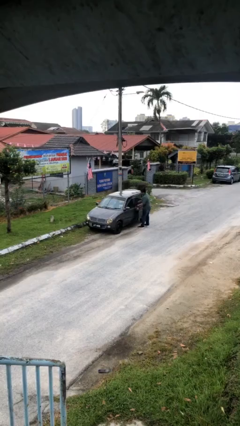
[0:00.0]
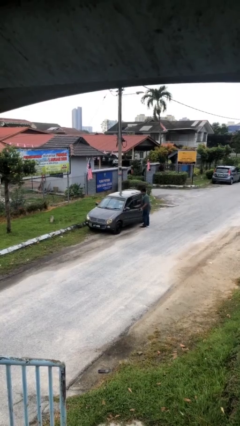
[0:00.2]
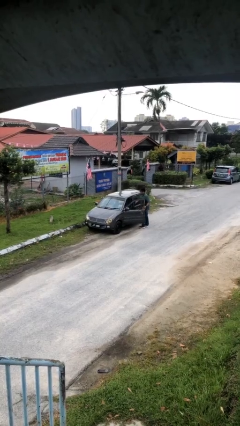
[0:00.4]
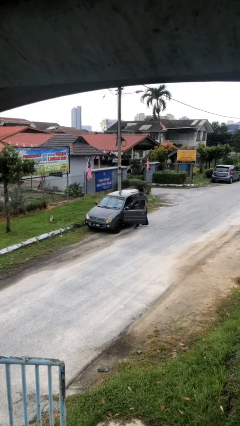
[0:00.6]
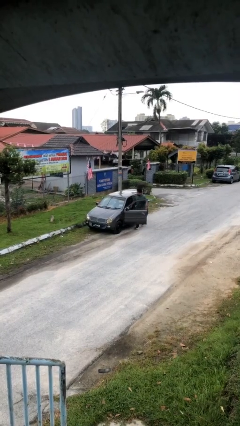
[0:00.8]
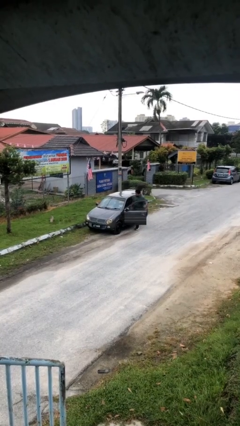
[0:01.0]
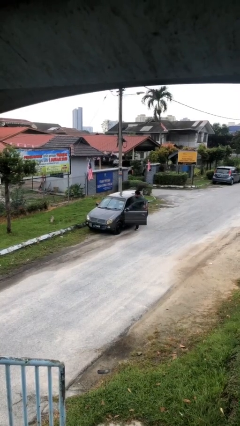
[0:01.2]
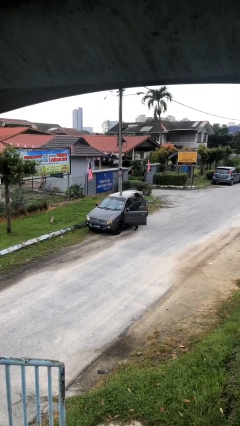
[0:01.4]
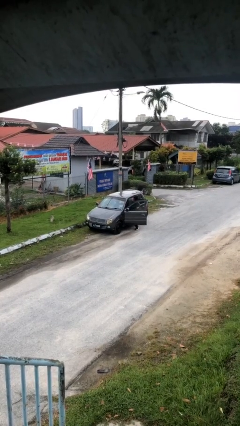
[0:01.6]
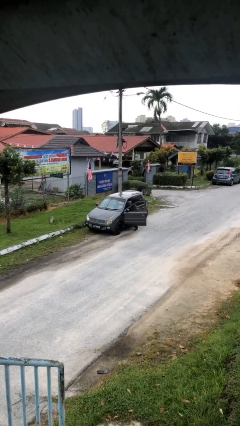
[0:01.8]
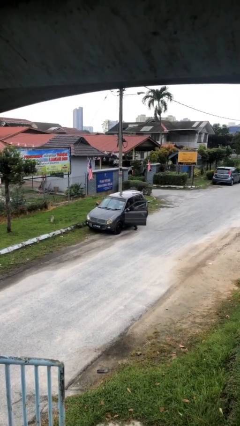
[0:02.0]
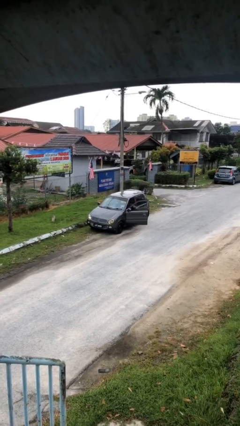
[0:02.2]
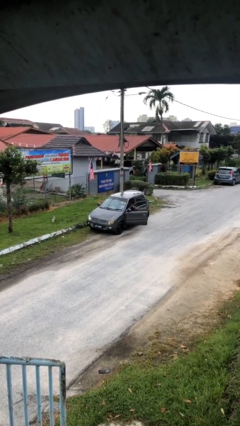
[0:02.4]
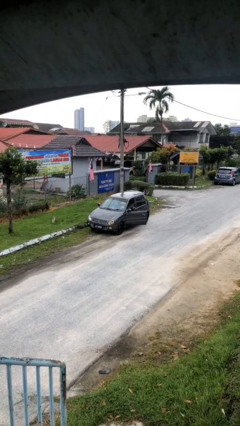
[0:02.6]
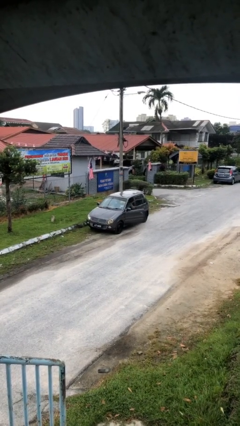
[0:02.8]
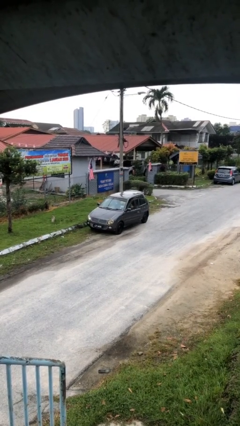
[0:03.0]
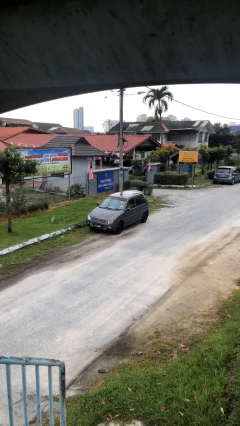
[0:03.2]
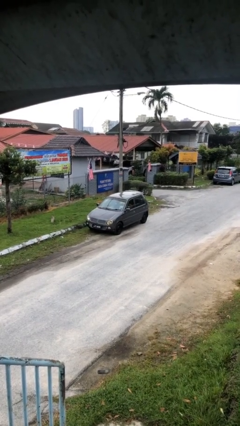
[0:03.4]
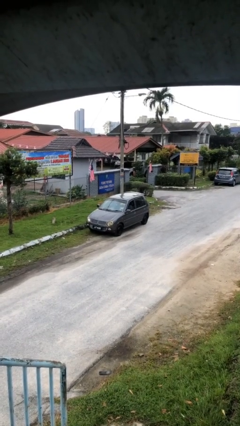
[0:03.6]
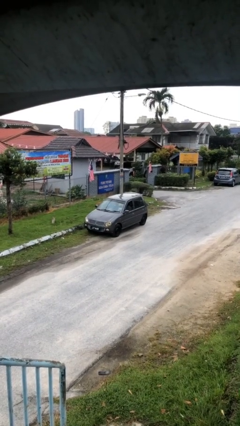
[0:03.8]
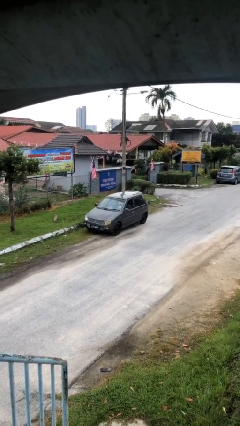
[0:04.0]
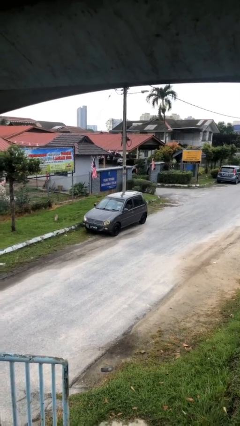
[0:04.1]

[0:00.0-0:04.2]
car picks up person

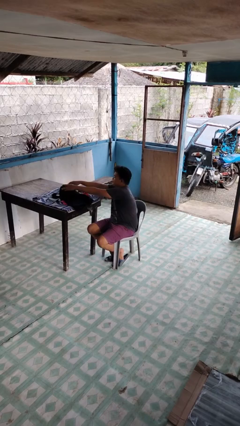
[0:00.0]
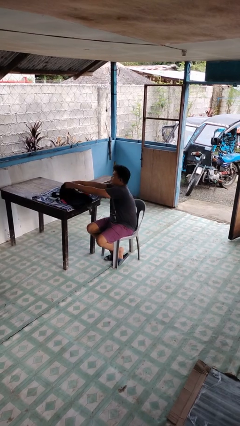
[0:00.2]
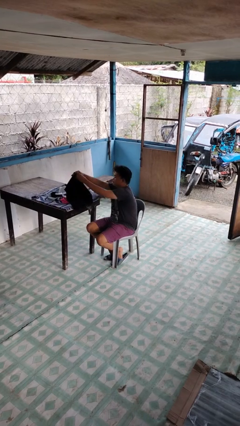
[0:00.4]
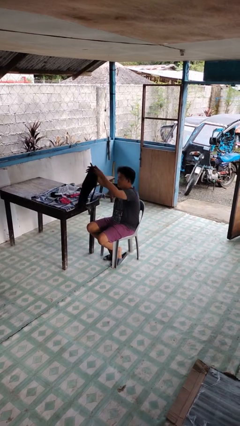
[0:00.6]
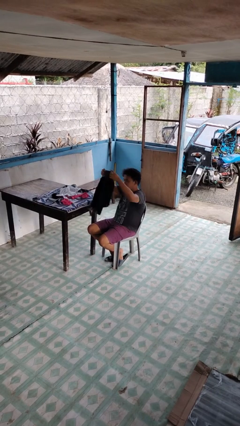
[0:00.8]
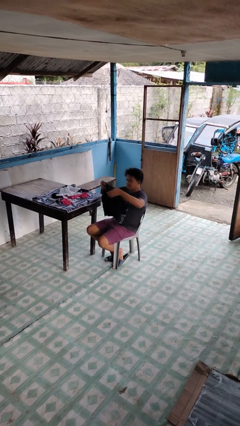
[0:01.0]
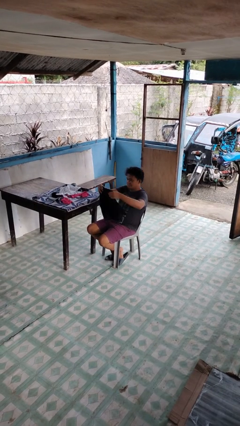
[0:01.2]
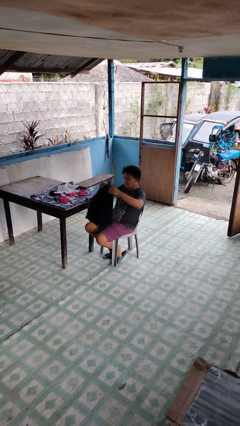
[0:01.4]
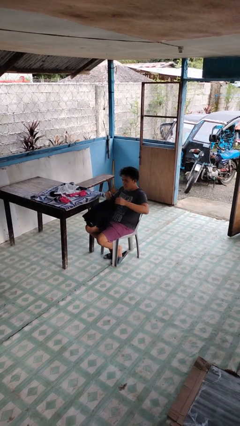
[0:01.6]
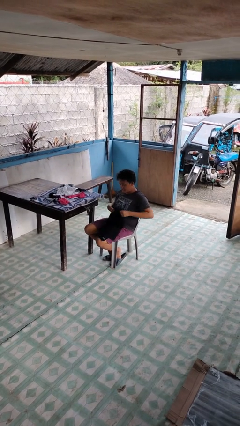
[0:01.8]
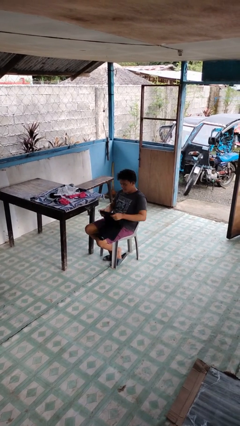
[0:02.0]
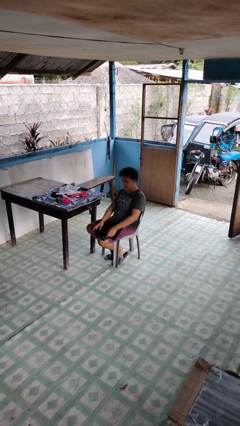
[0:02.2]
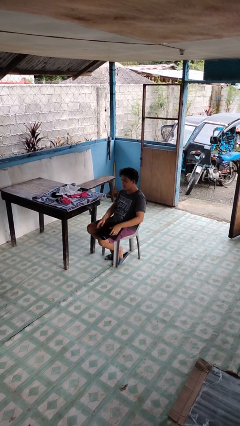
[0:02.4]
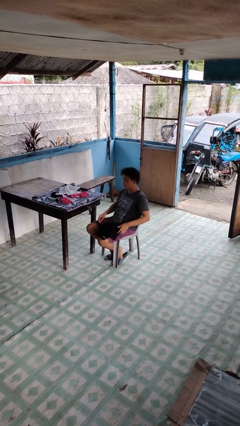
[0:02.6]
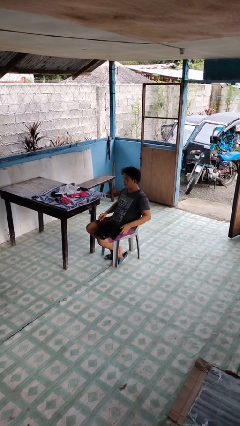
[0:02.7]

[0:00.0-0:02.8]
person folds pants

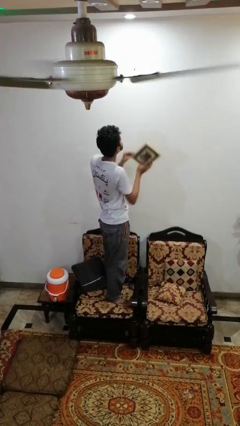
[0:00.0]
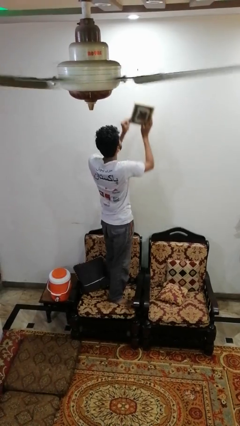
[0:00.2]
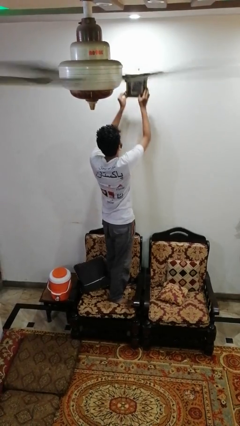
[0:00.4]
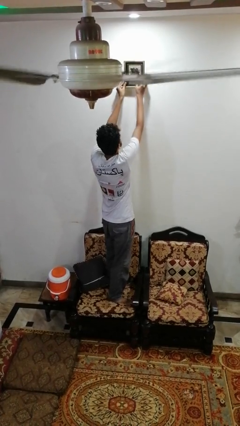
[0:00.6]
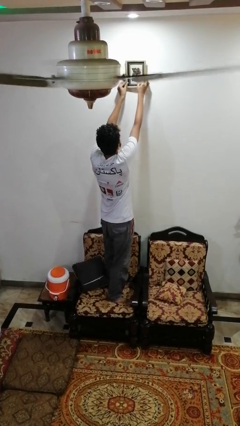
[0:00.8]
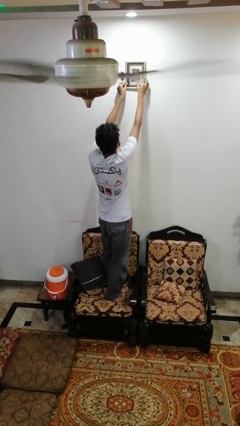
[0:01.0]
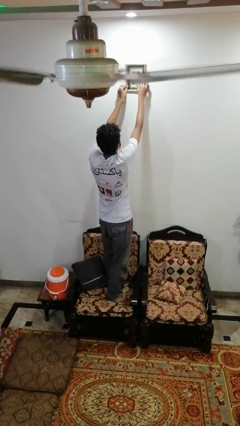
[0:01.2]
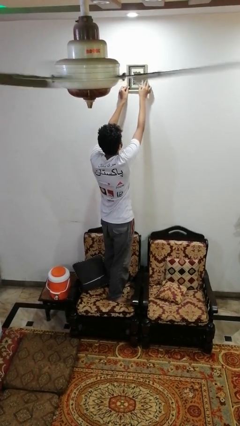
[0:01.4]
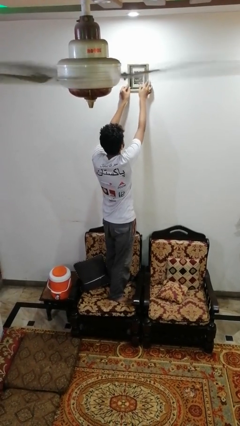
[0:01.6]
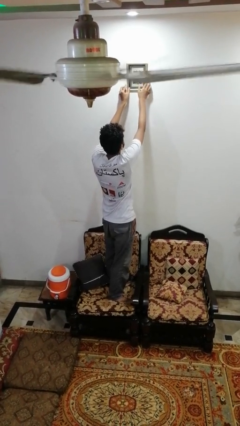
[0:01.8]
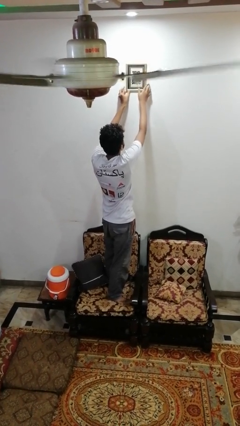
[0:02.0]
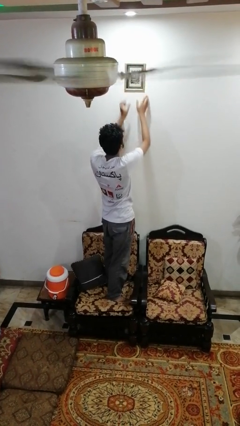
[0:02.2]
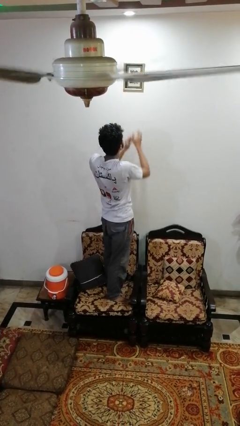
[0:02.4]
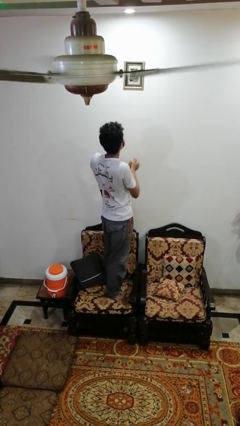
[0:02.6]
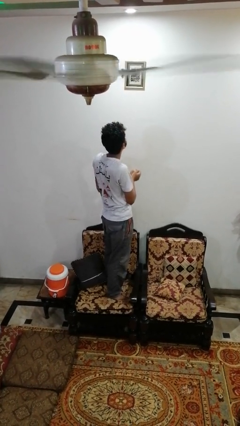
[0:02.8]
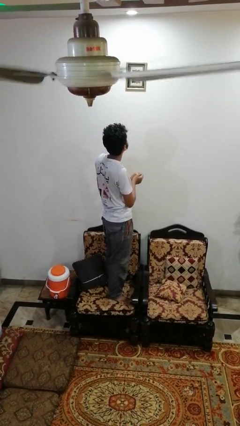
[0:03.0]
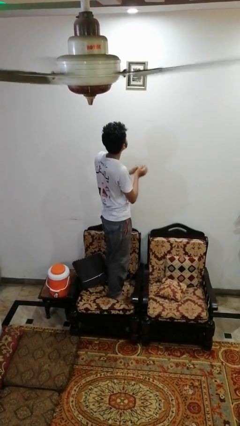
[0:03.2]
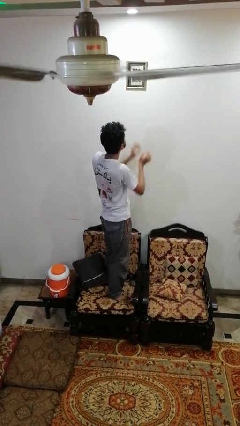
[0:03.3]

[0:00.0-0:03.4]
person puts up picture frame

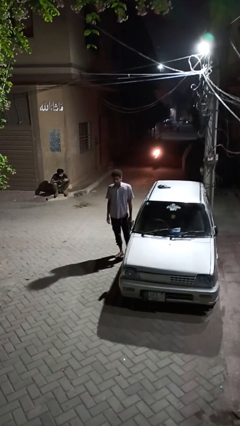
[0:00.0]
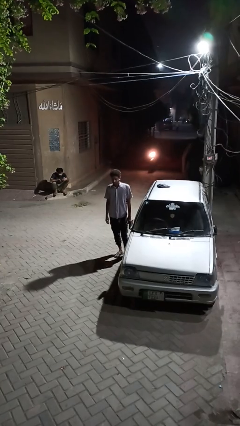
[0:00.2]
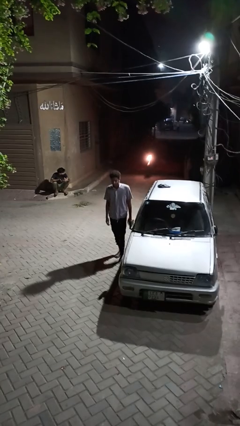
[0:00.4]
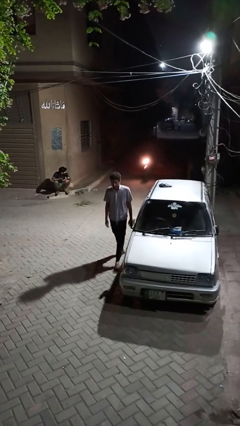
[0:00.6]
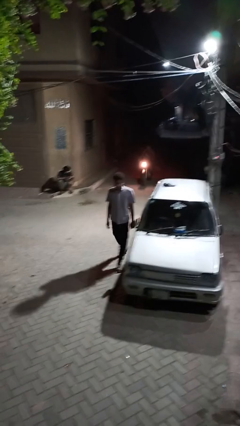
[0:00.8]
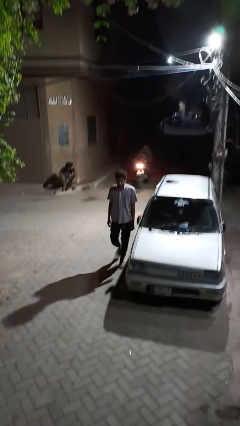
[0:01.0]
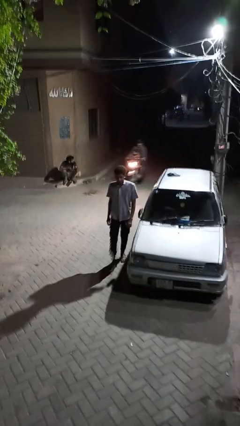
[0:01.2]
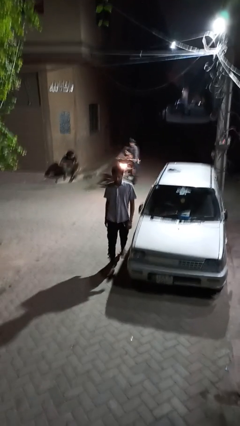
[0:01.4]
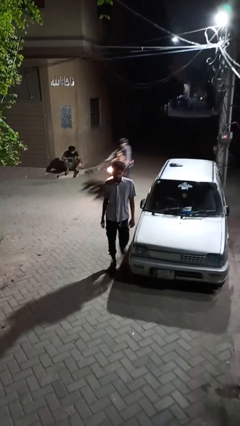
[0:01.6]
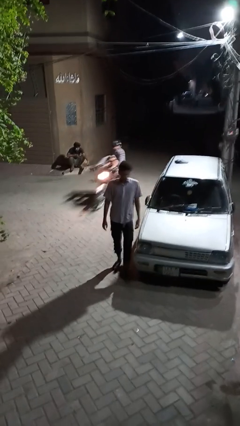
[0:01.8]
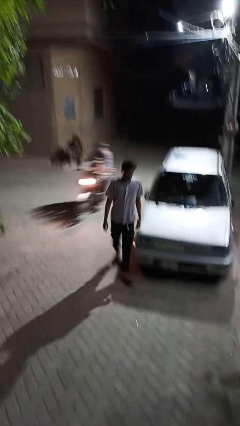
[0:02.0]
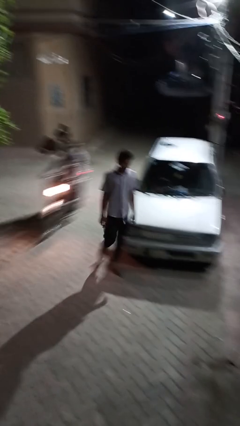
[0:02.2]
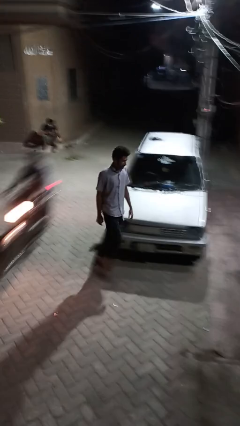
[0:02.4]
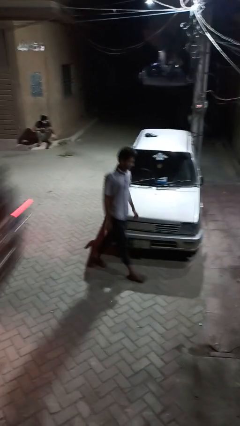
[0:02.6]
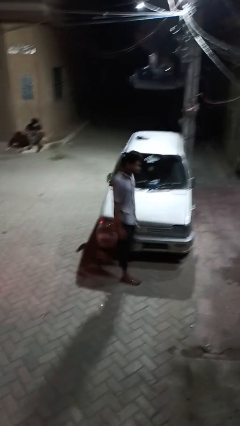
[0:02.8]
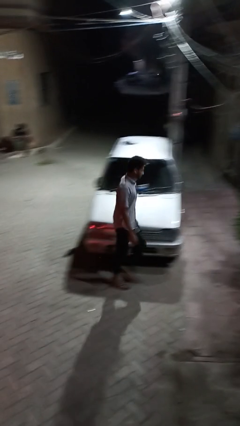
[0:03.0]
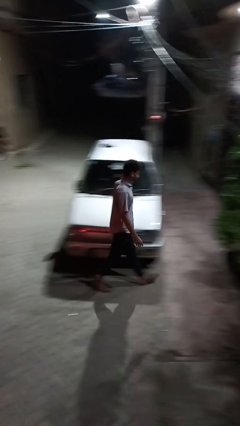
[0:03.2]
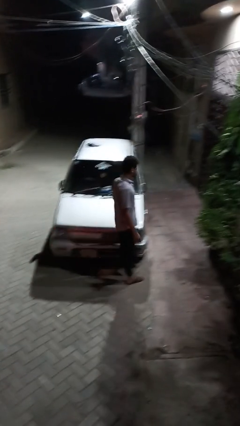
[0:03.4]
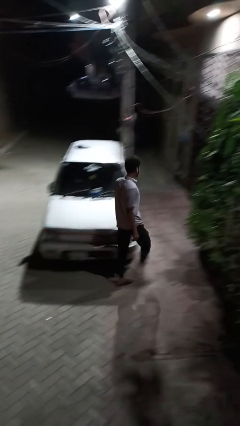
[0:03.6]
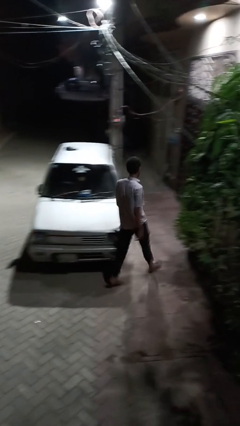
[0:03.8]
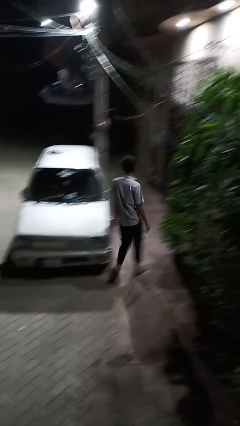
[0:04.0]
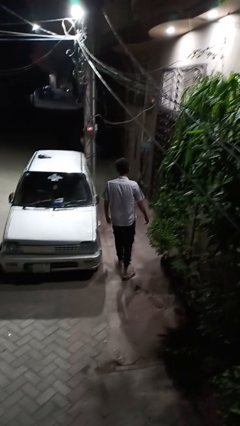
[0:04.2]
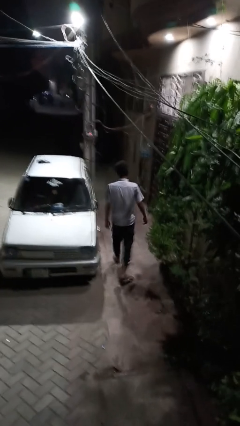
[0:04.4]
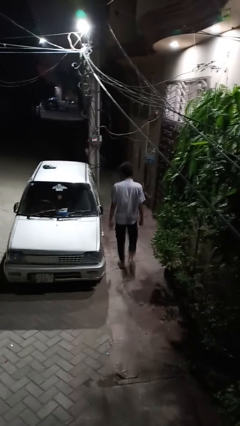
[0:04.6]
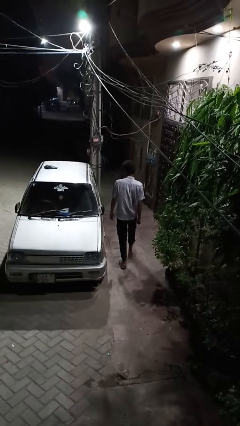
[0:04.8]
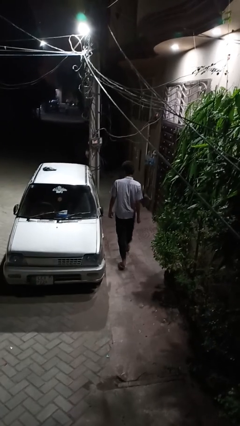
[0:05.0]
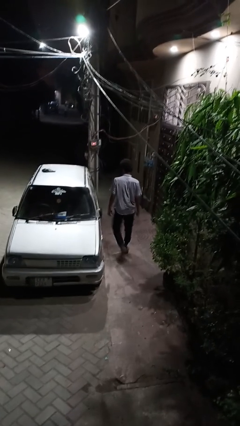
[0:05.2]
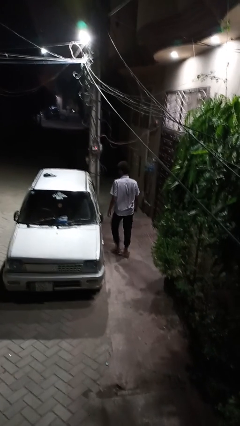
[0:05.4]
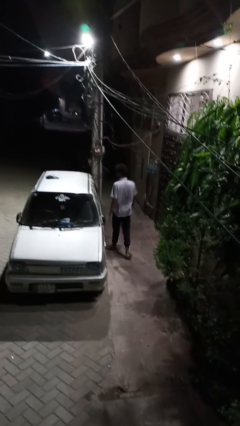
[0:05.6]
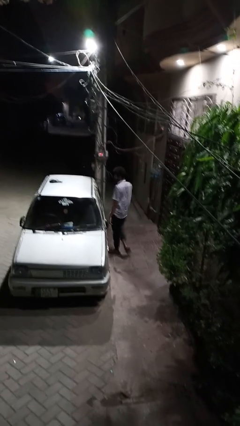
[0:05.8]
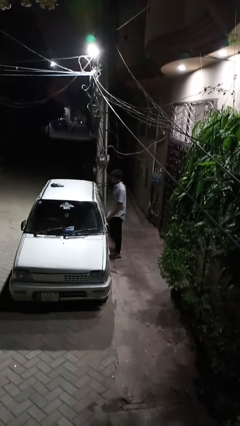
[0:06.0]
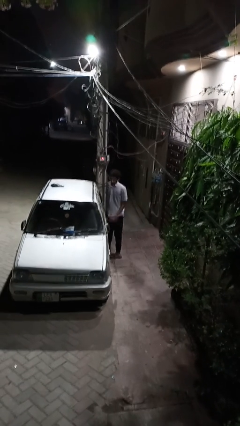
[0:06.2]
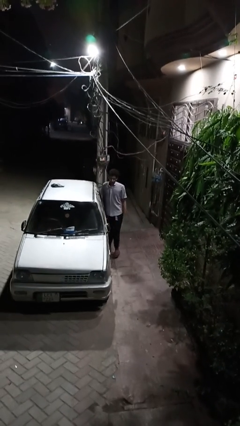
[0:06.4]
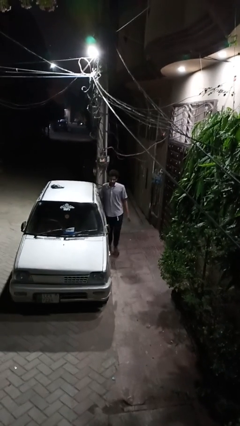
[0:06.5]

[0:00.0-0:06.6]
person walks around car

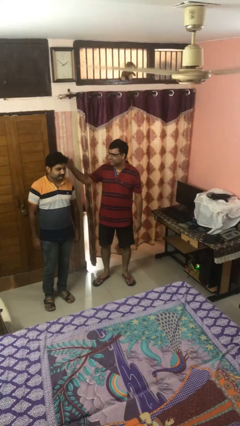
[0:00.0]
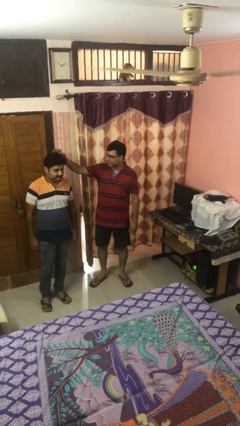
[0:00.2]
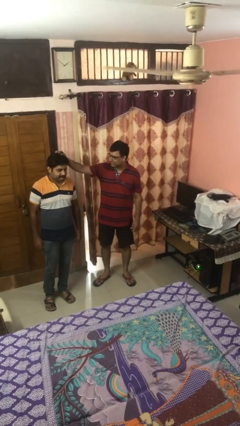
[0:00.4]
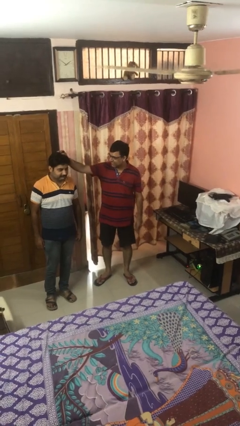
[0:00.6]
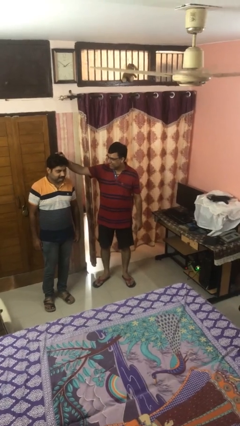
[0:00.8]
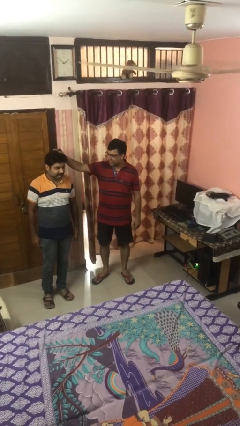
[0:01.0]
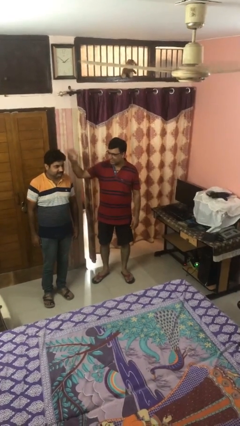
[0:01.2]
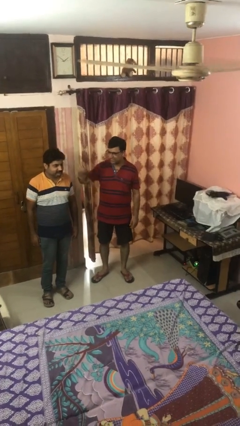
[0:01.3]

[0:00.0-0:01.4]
person grabs person by hair
